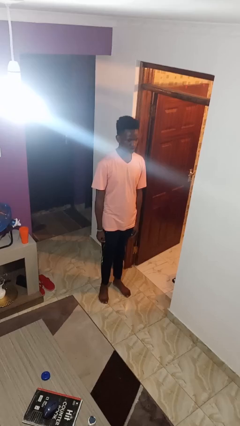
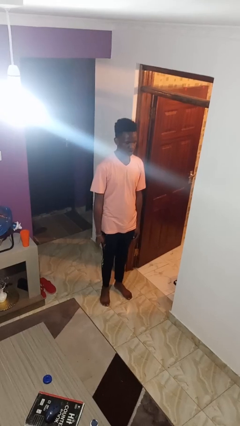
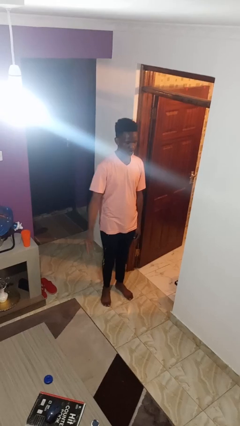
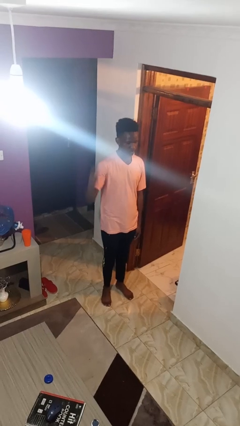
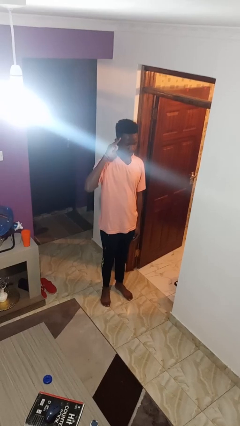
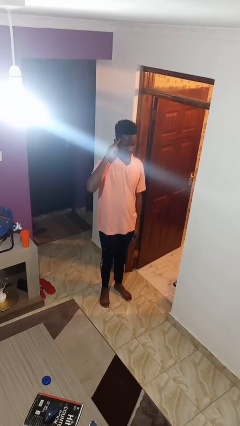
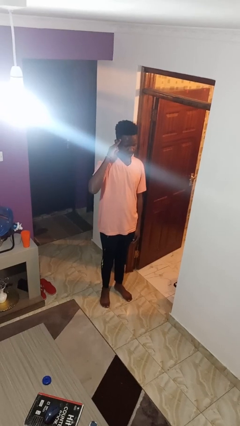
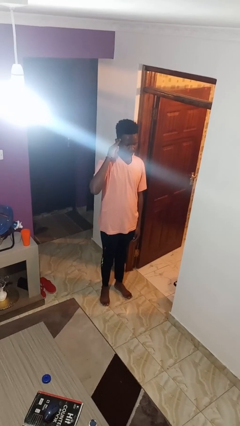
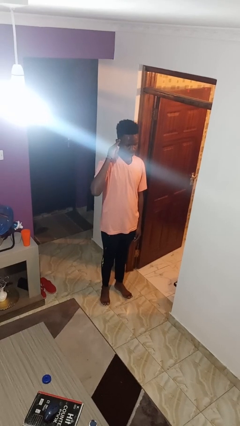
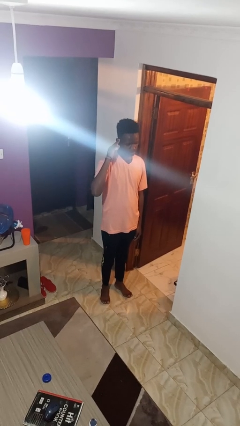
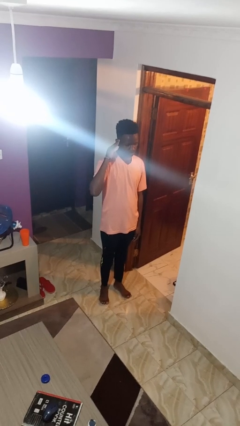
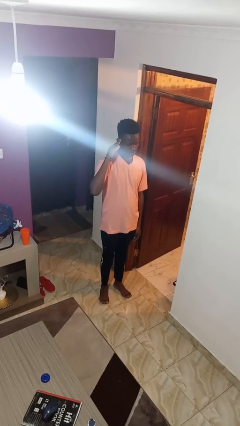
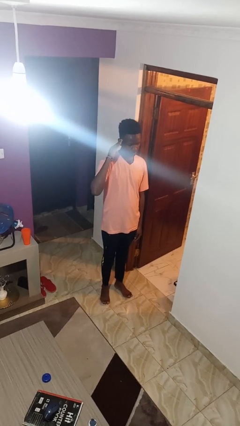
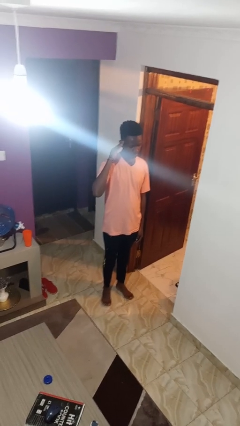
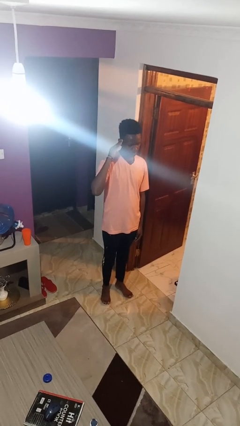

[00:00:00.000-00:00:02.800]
person salutes

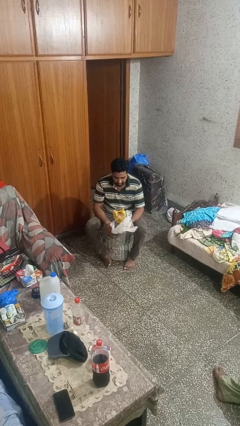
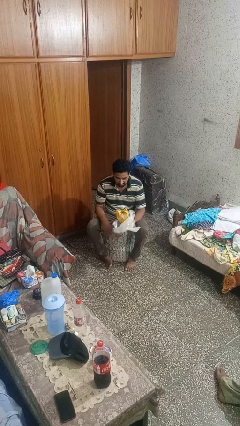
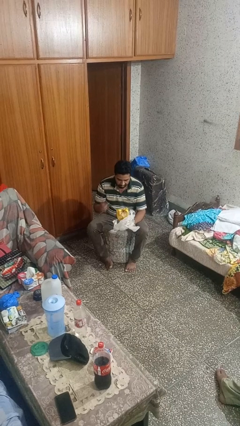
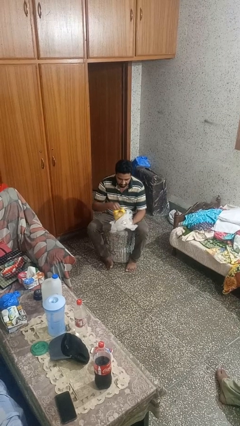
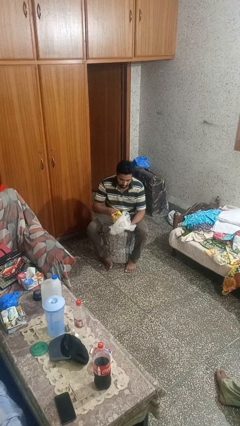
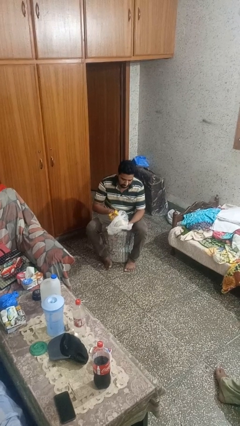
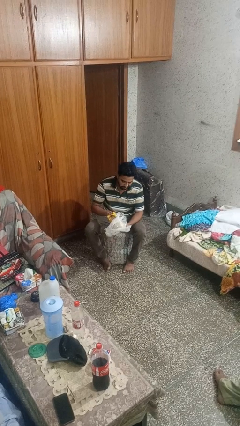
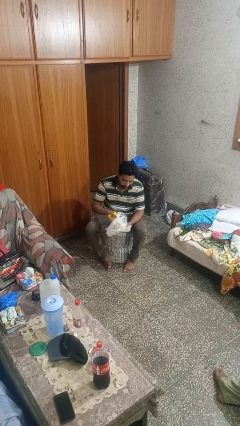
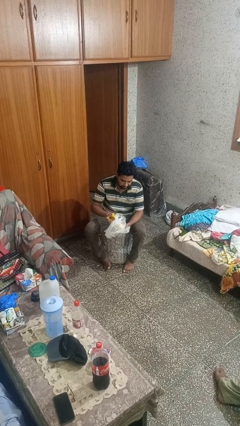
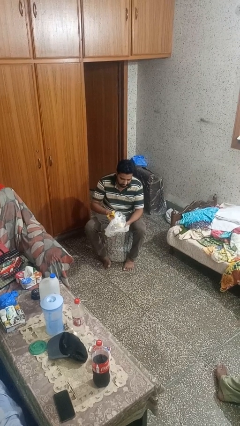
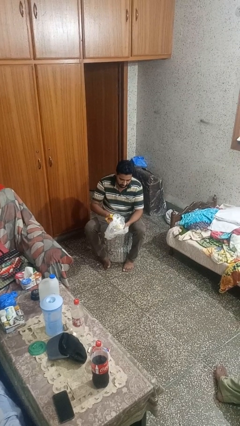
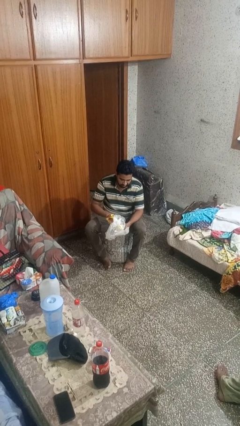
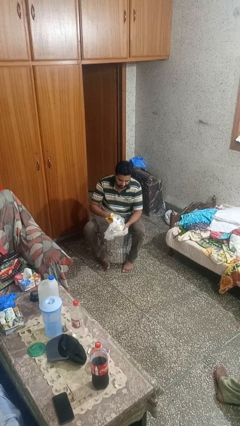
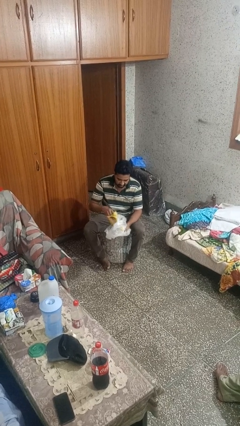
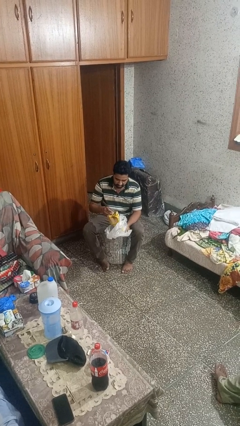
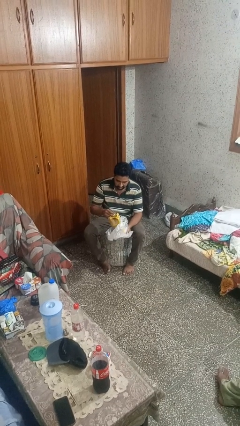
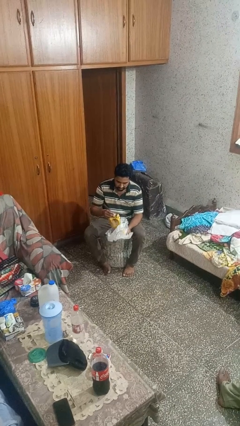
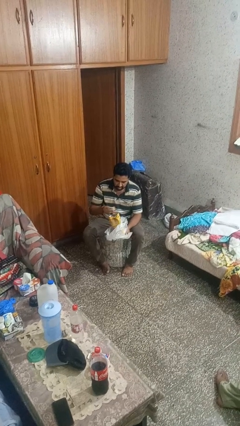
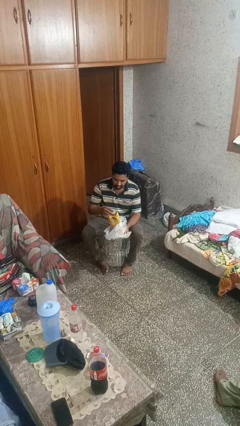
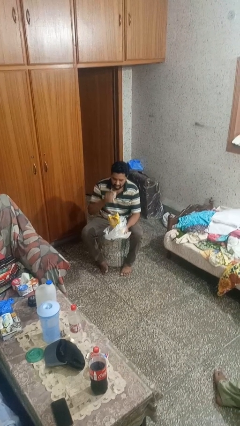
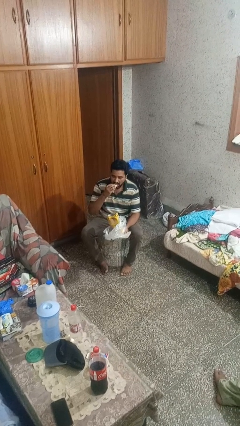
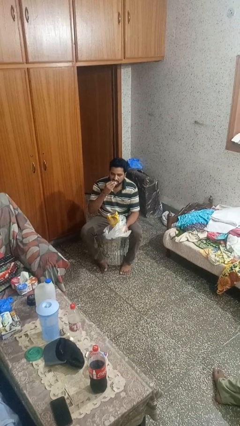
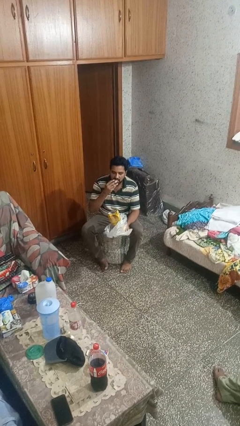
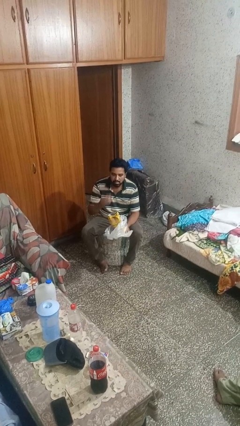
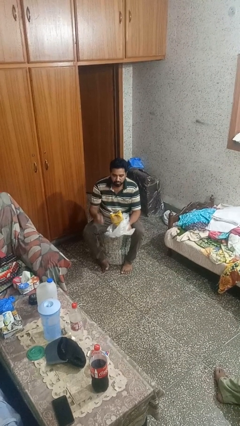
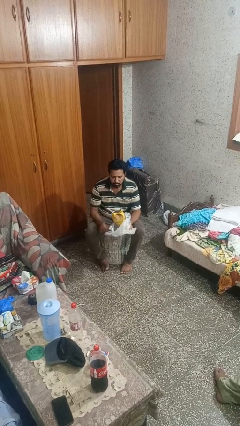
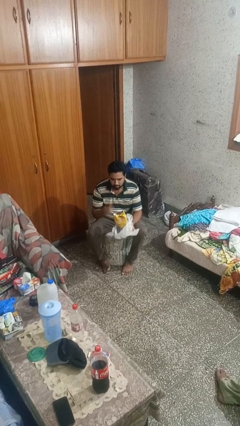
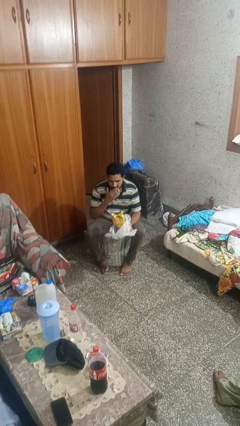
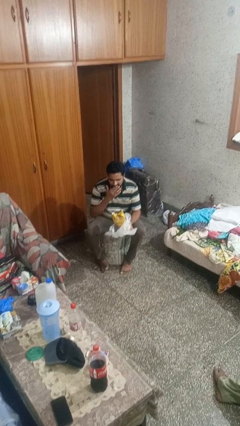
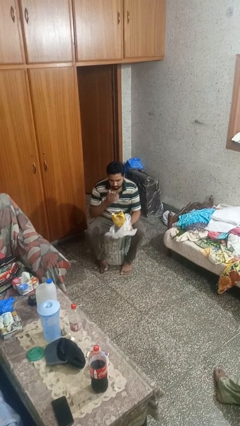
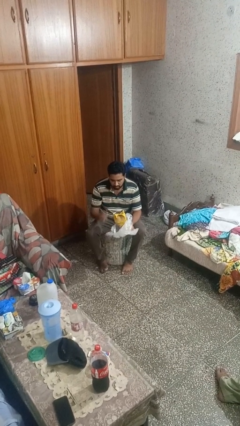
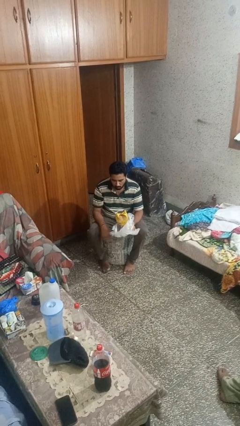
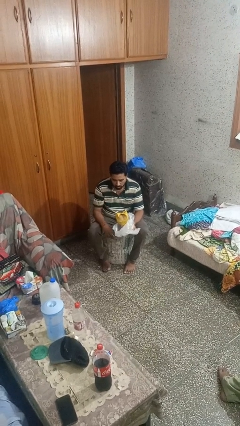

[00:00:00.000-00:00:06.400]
person eats snack from bag

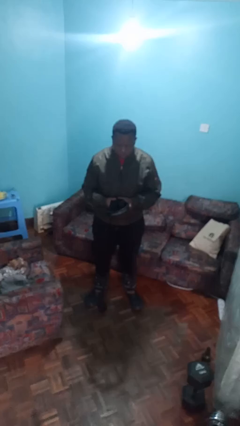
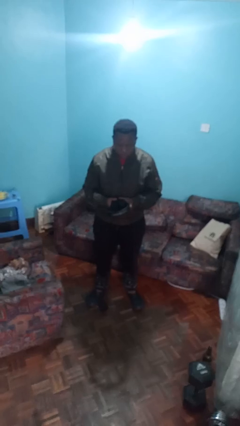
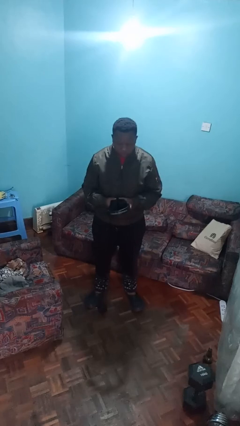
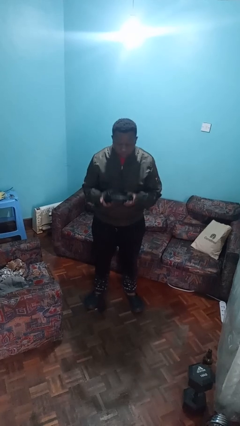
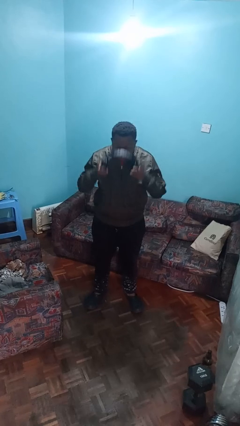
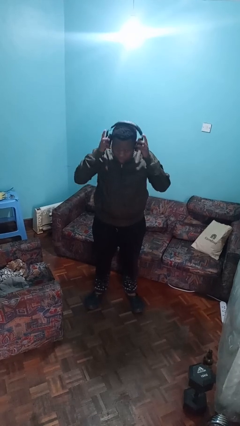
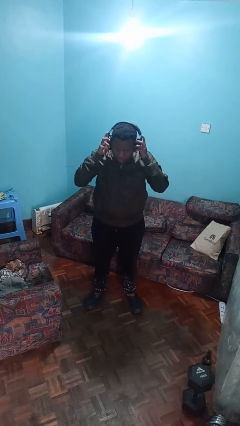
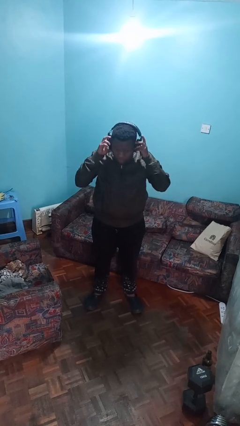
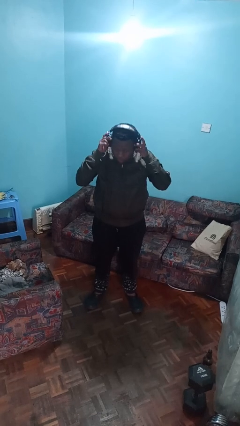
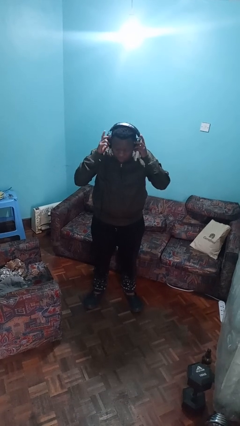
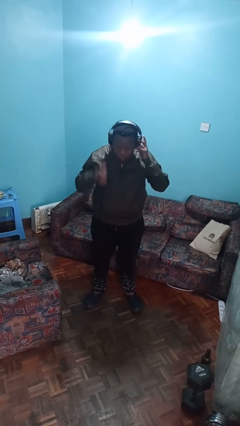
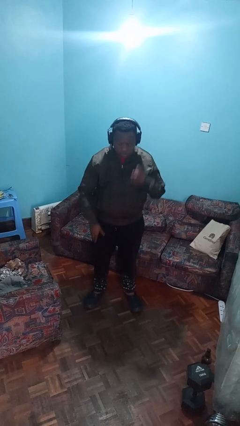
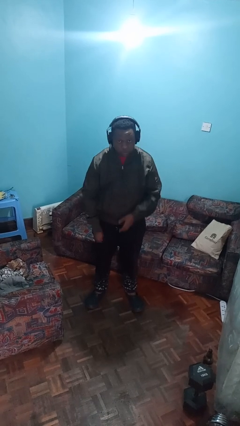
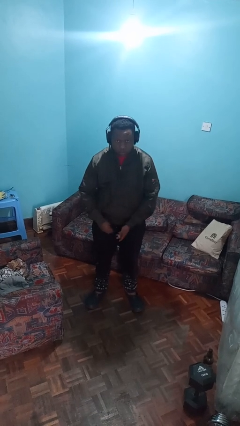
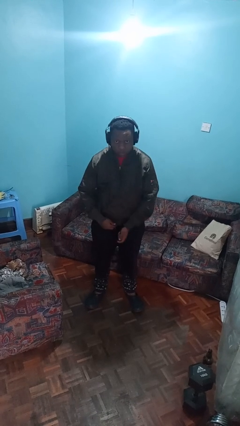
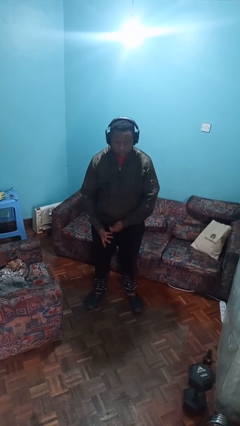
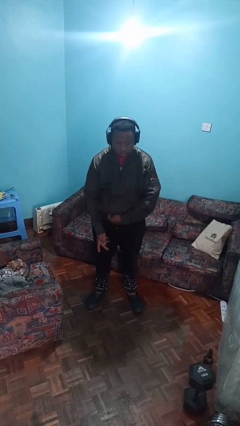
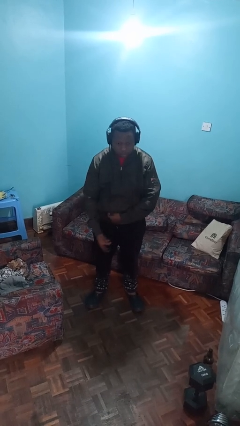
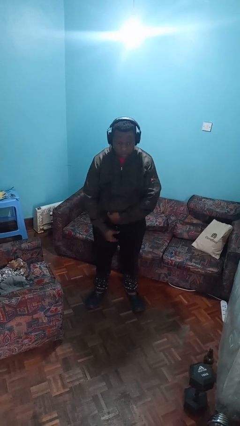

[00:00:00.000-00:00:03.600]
person puts on headphones

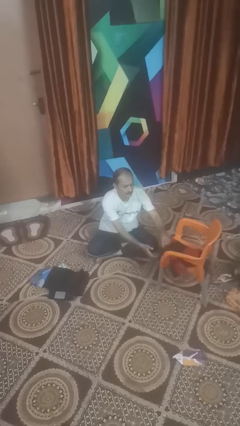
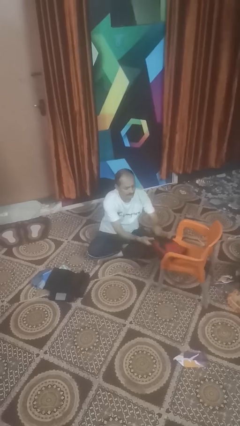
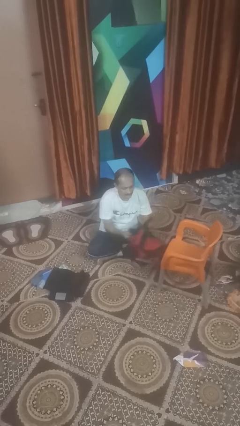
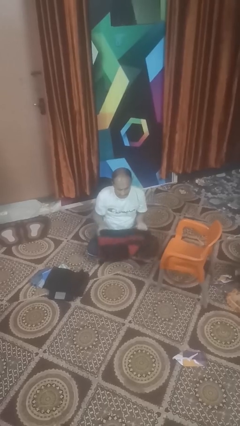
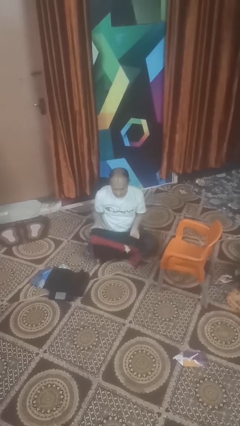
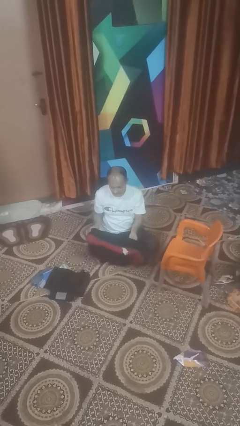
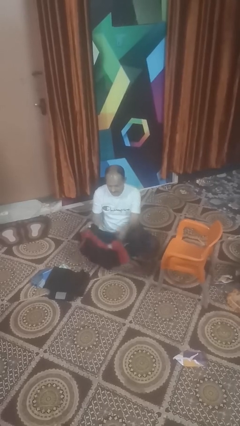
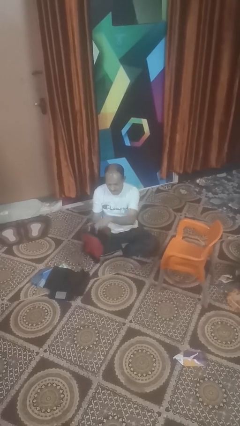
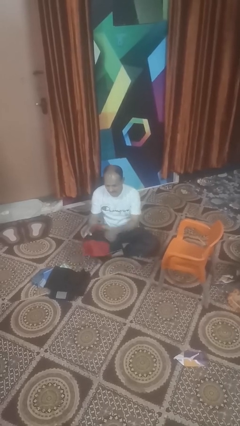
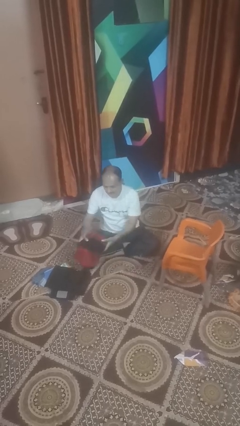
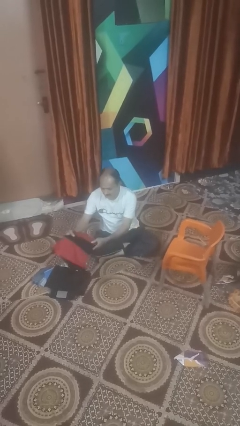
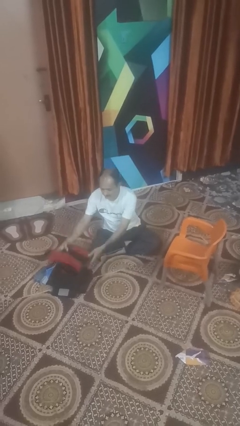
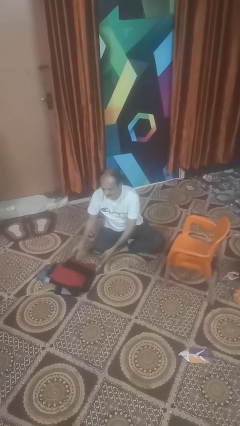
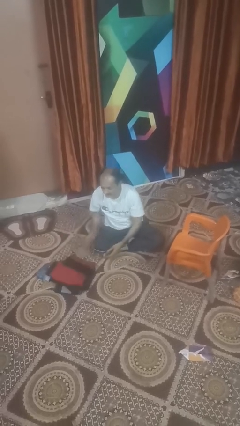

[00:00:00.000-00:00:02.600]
person folds shirt

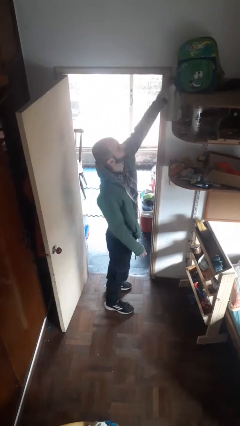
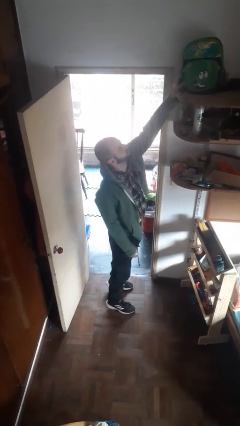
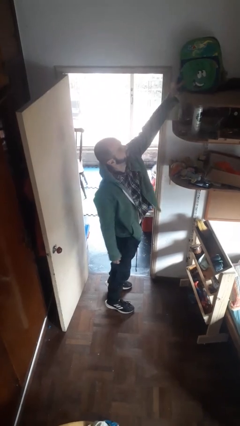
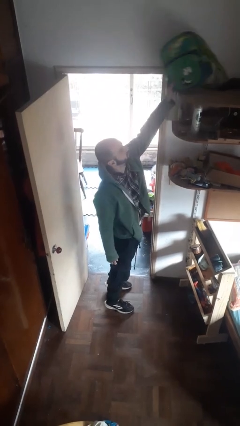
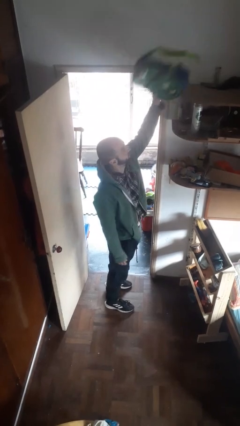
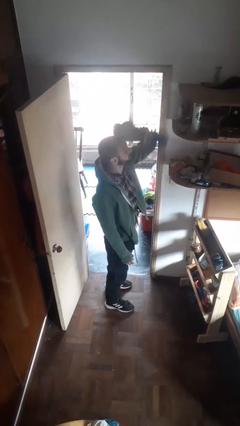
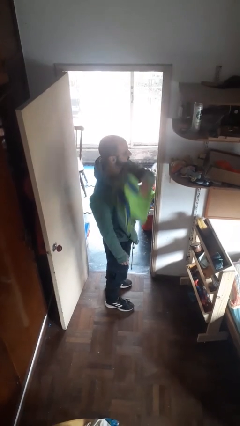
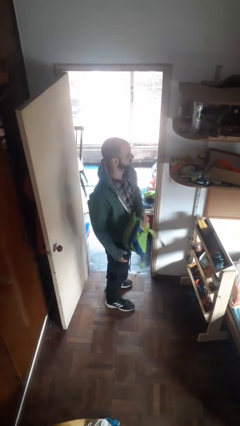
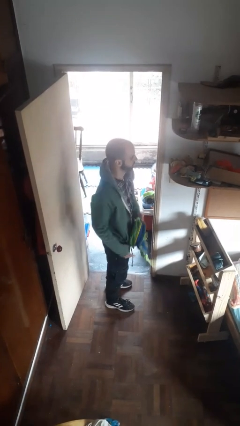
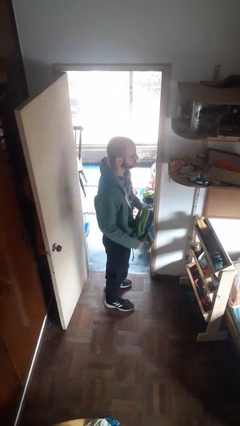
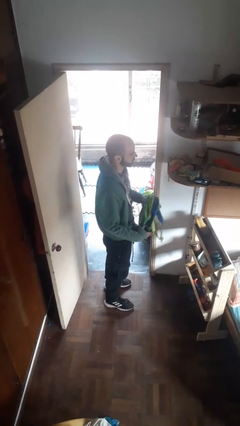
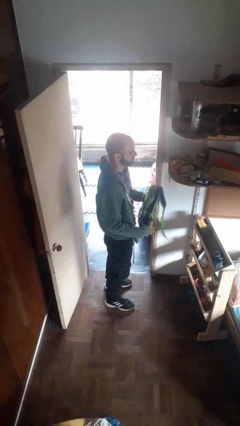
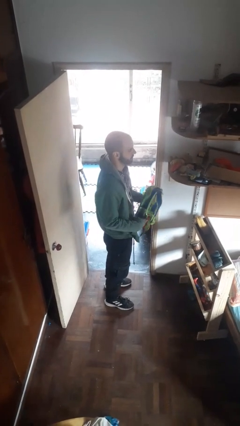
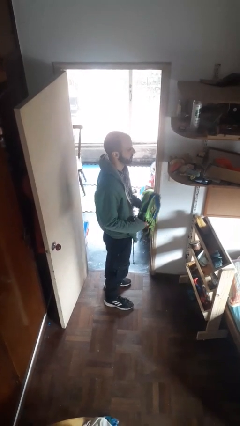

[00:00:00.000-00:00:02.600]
person puts down object on shelf
